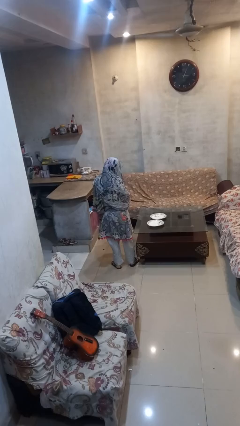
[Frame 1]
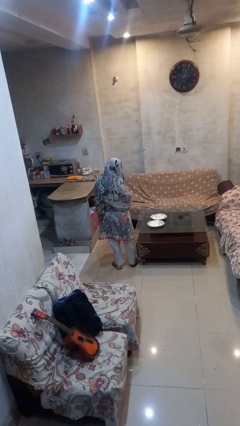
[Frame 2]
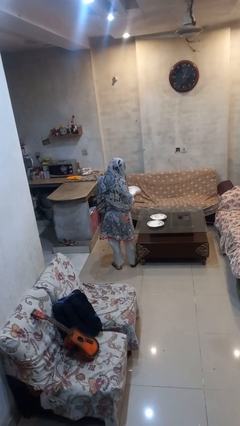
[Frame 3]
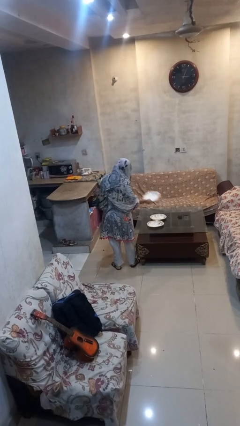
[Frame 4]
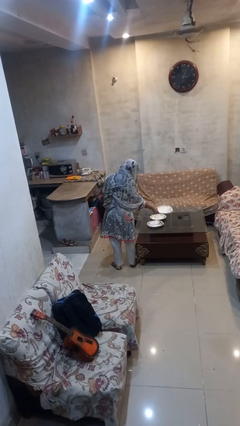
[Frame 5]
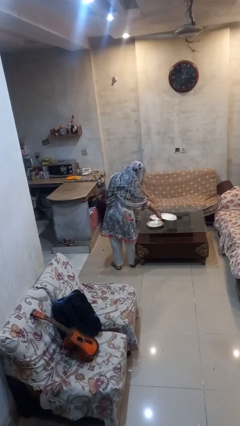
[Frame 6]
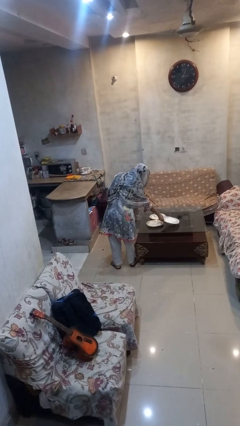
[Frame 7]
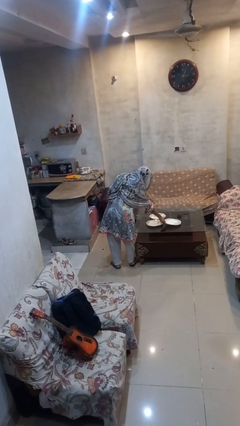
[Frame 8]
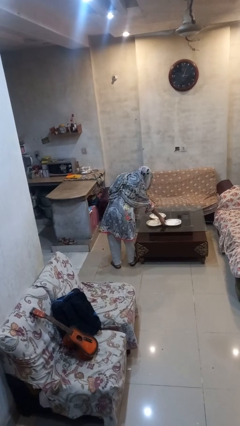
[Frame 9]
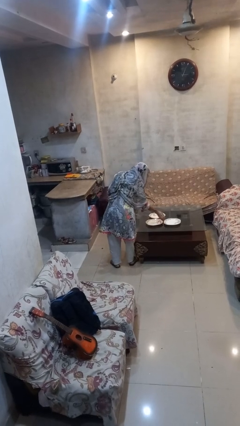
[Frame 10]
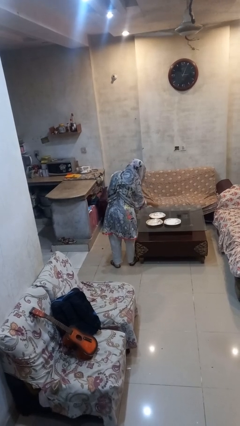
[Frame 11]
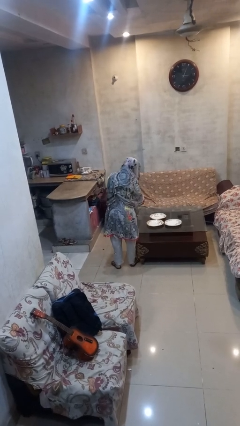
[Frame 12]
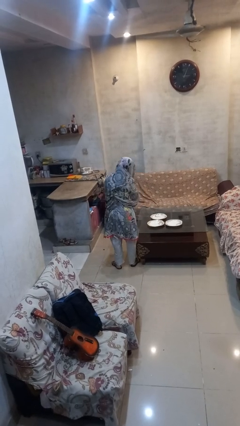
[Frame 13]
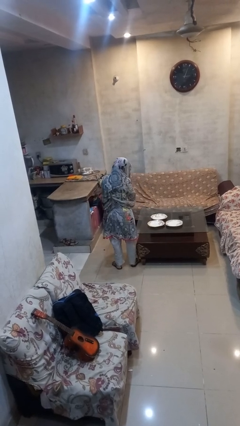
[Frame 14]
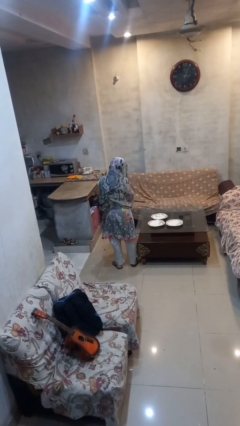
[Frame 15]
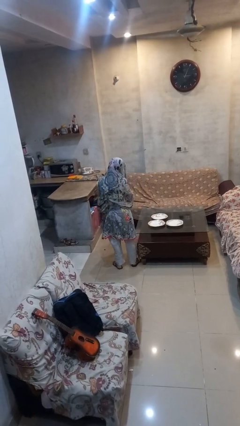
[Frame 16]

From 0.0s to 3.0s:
person sets table

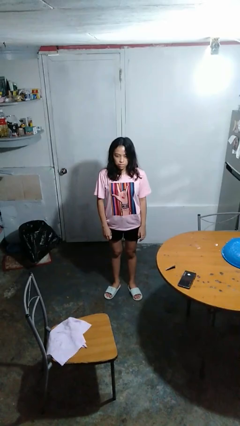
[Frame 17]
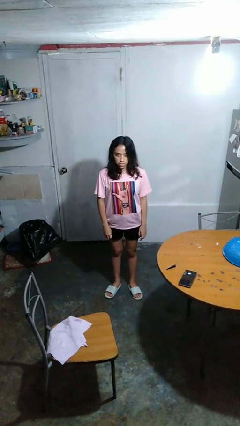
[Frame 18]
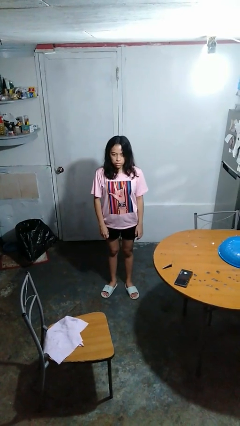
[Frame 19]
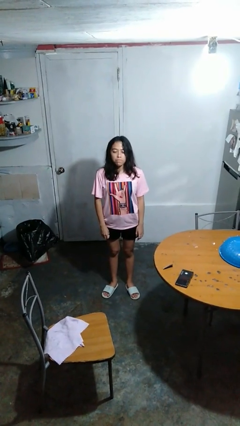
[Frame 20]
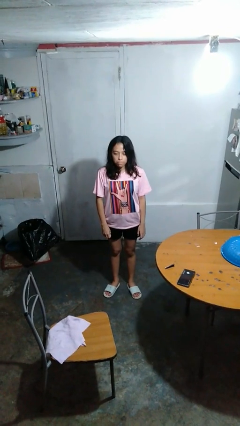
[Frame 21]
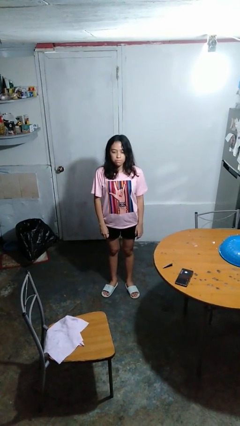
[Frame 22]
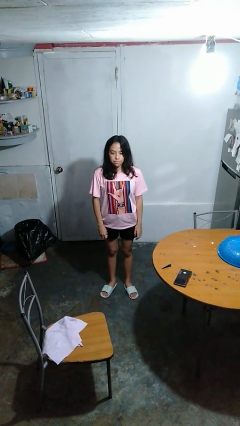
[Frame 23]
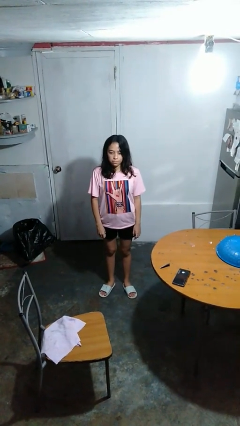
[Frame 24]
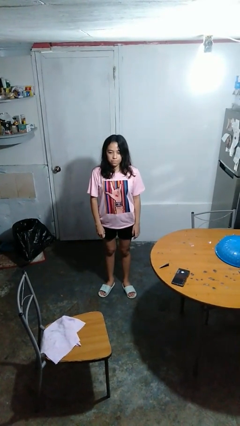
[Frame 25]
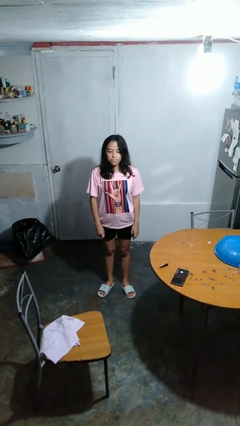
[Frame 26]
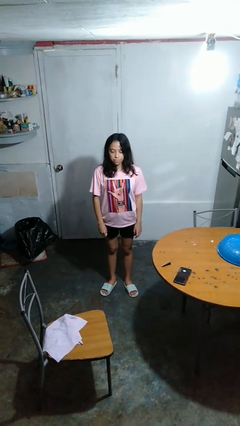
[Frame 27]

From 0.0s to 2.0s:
person nods head

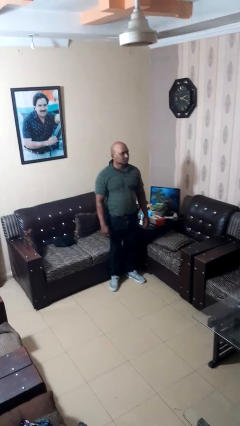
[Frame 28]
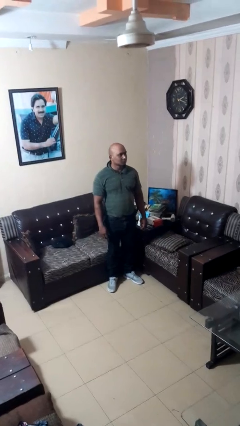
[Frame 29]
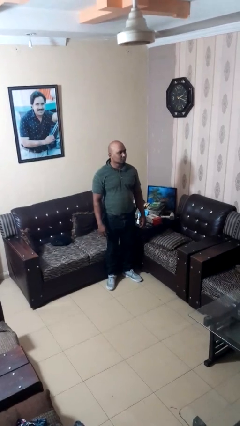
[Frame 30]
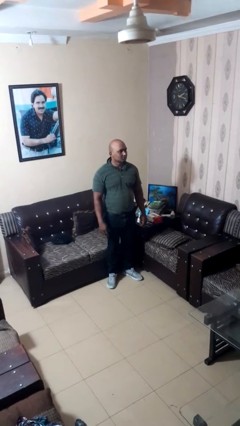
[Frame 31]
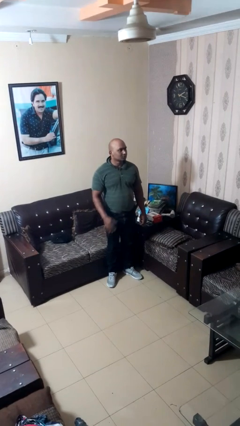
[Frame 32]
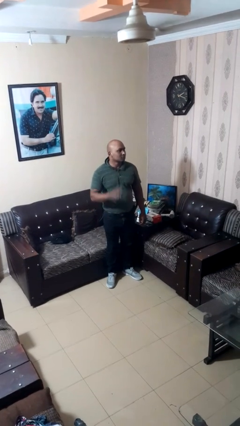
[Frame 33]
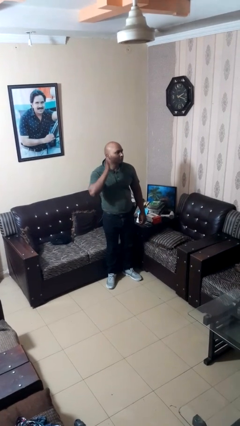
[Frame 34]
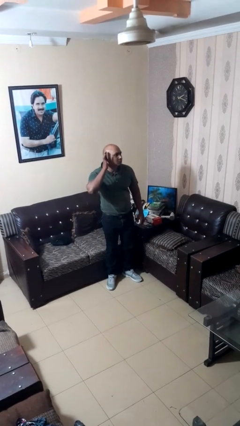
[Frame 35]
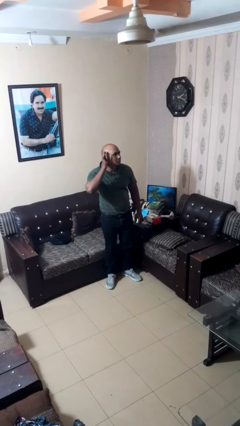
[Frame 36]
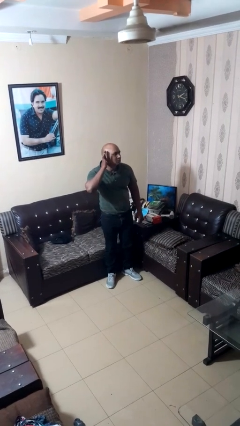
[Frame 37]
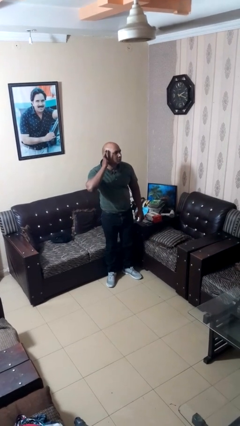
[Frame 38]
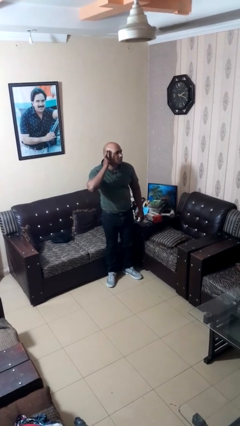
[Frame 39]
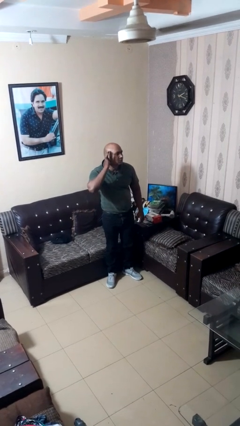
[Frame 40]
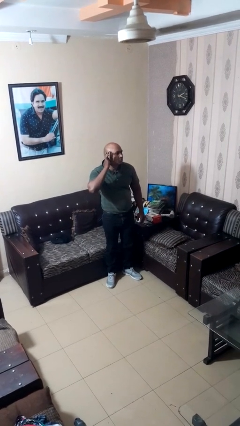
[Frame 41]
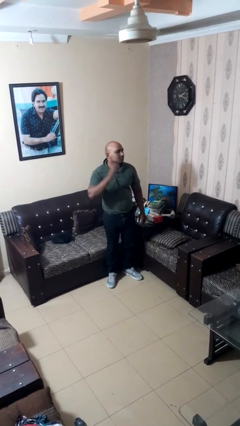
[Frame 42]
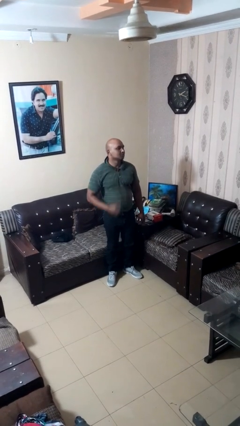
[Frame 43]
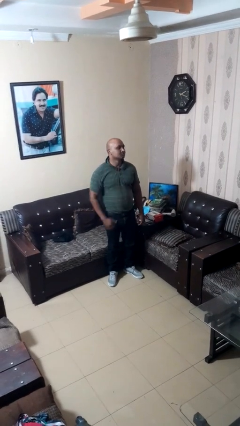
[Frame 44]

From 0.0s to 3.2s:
person gestures listen closely

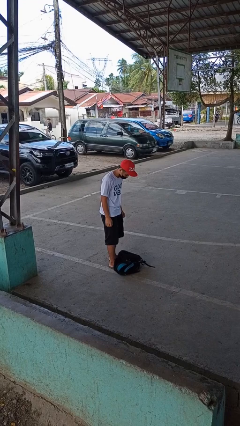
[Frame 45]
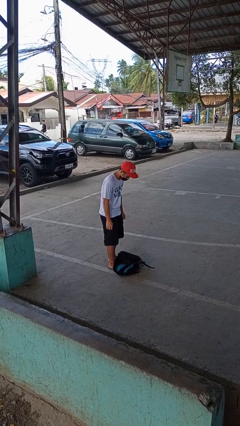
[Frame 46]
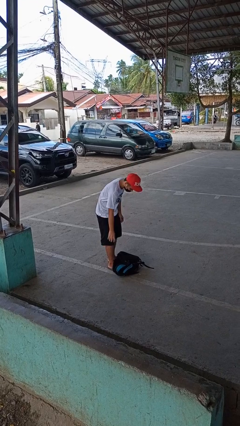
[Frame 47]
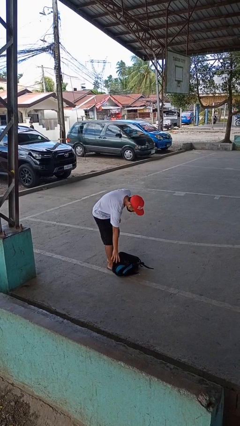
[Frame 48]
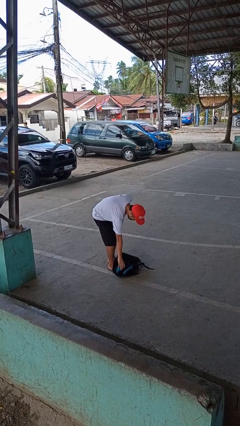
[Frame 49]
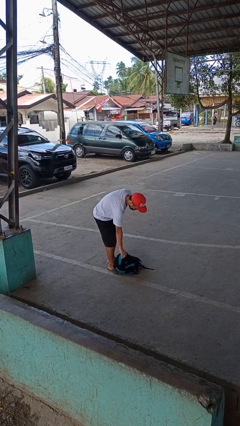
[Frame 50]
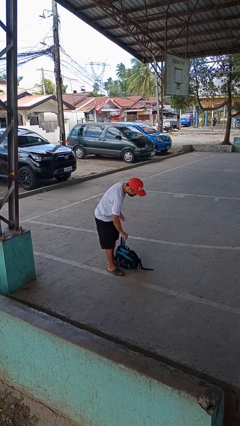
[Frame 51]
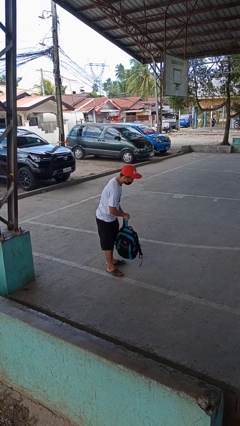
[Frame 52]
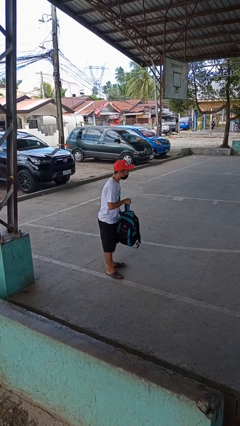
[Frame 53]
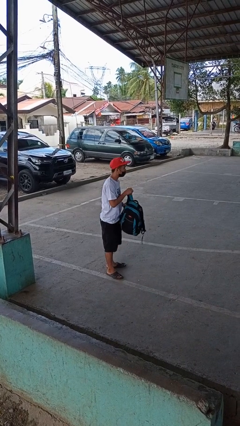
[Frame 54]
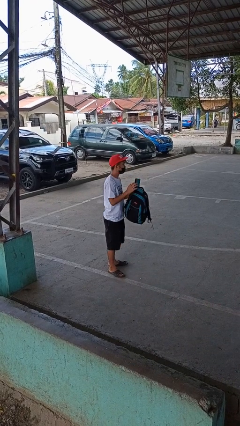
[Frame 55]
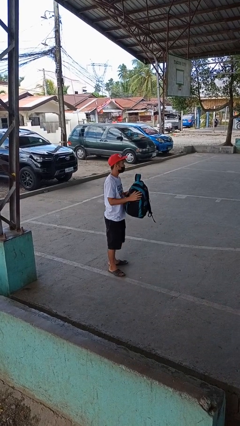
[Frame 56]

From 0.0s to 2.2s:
person picks up object from floor

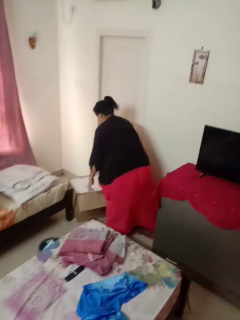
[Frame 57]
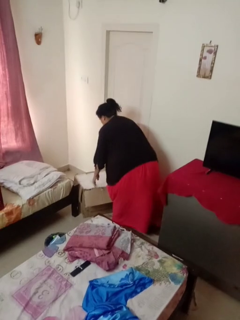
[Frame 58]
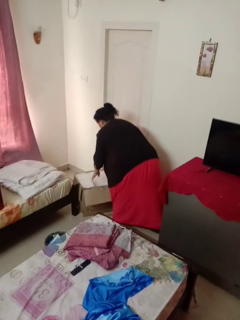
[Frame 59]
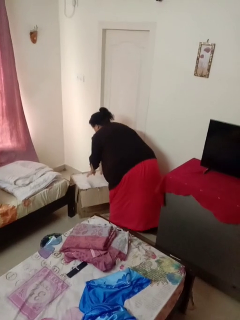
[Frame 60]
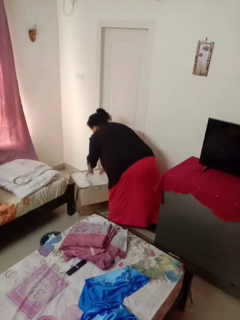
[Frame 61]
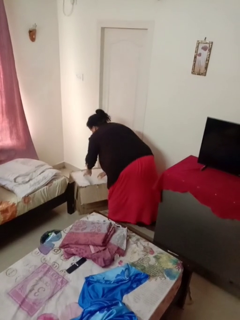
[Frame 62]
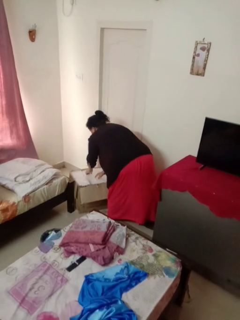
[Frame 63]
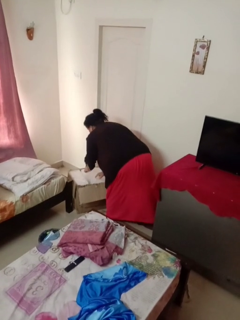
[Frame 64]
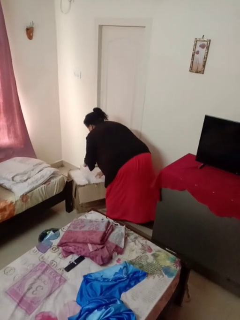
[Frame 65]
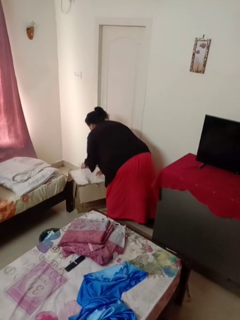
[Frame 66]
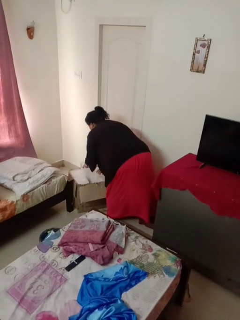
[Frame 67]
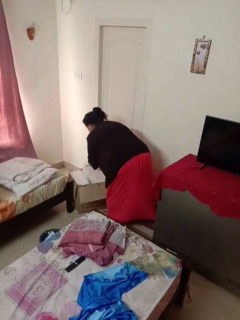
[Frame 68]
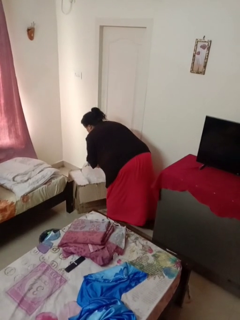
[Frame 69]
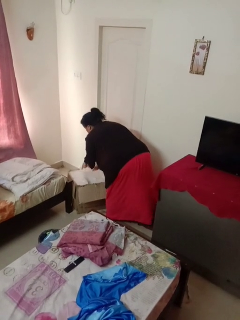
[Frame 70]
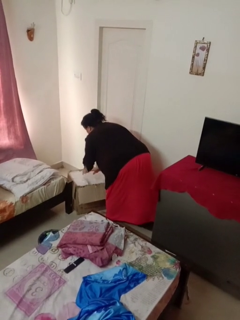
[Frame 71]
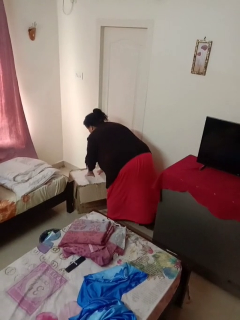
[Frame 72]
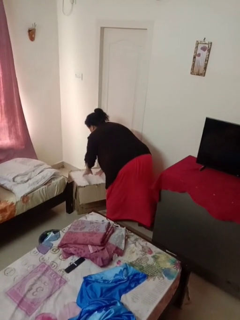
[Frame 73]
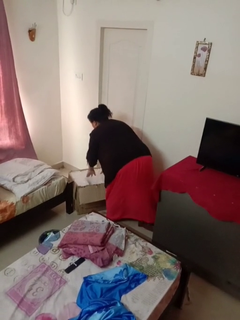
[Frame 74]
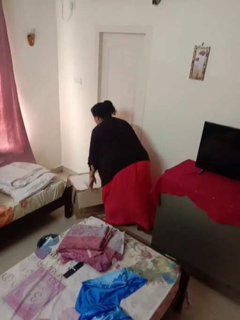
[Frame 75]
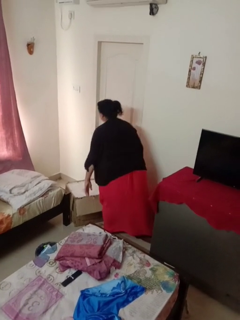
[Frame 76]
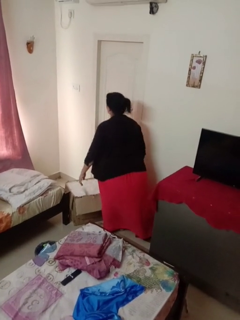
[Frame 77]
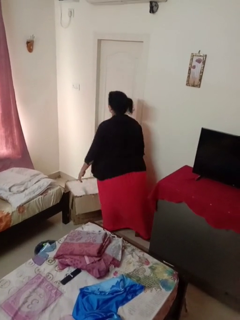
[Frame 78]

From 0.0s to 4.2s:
person searches in box

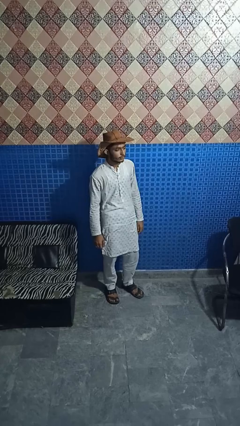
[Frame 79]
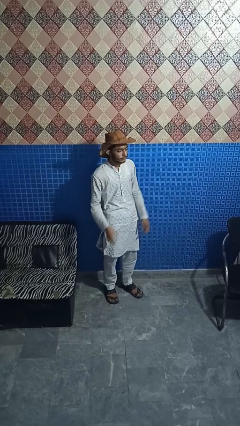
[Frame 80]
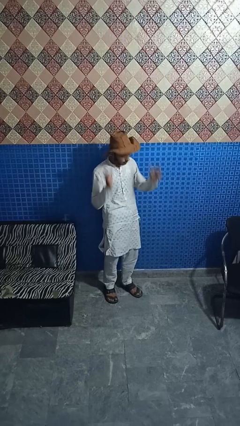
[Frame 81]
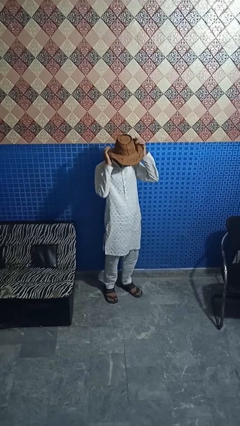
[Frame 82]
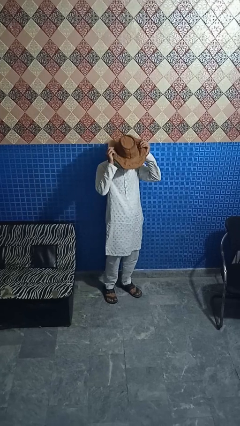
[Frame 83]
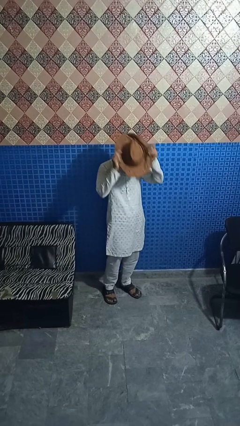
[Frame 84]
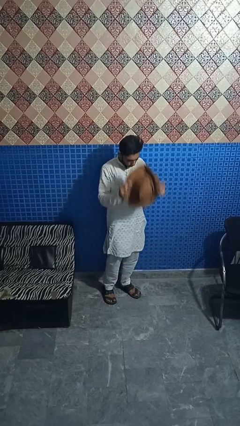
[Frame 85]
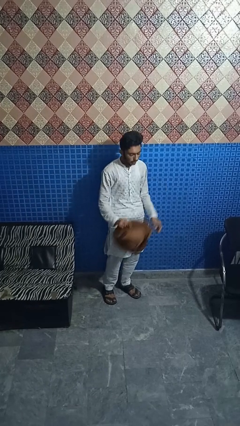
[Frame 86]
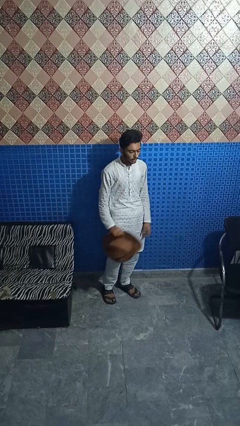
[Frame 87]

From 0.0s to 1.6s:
person takes off hat

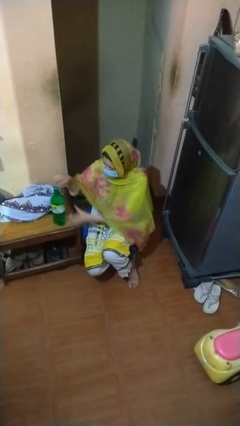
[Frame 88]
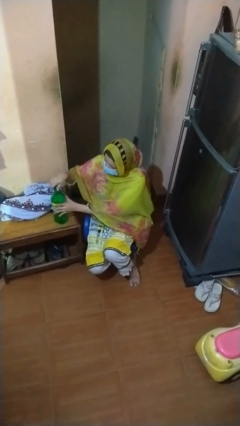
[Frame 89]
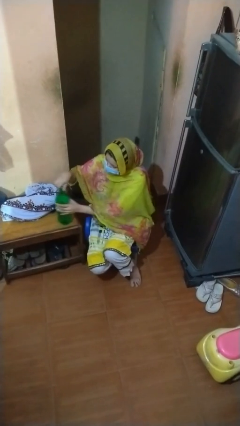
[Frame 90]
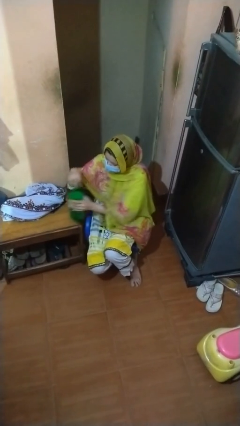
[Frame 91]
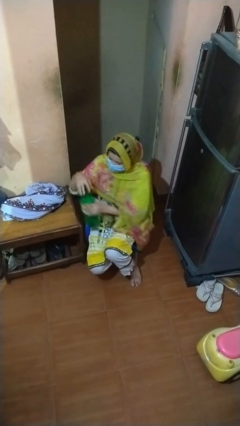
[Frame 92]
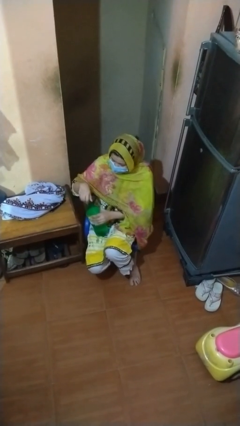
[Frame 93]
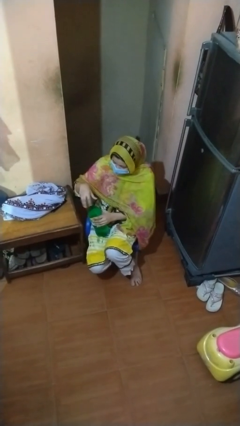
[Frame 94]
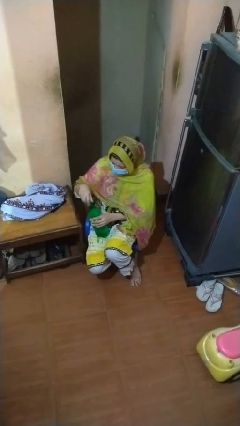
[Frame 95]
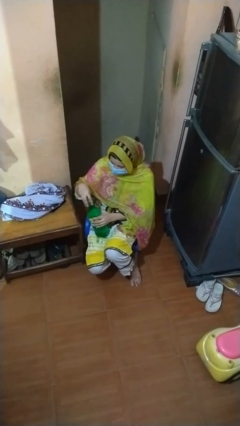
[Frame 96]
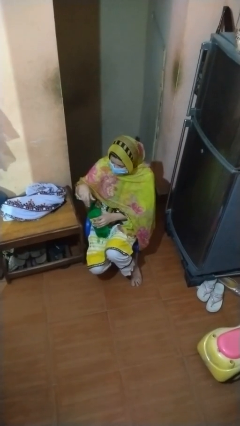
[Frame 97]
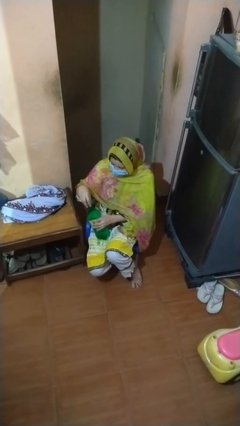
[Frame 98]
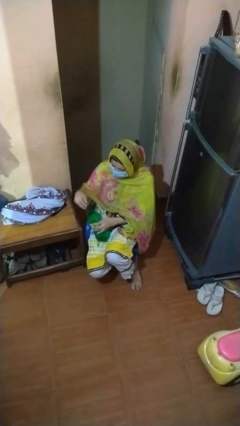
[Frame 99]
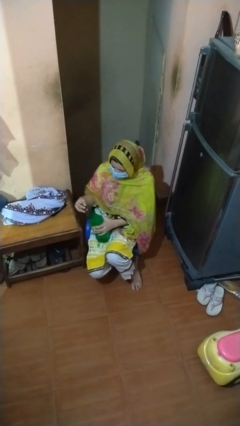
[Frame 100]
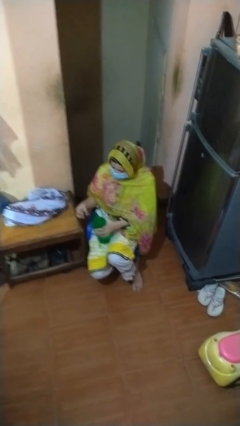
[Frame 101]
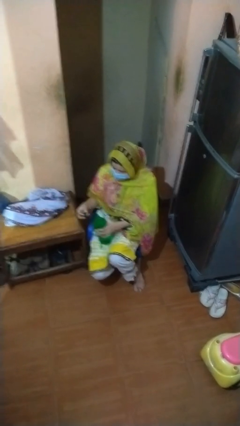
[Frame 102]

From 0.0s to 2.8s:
person unscrews lid from bottle
